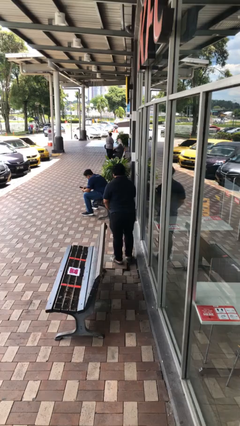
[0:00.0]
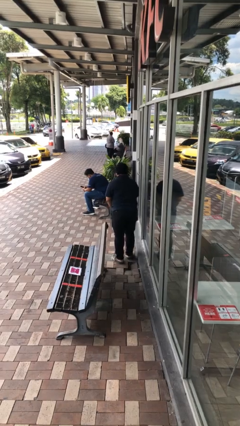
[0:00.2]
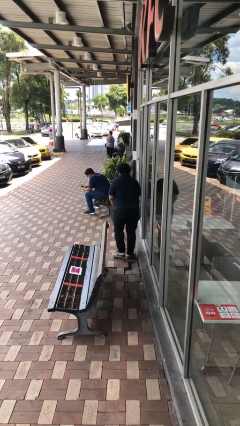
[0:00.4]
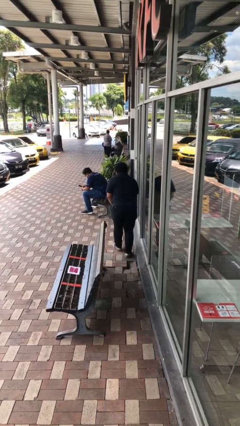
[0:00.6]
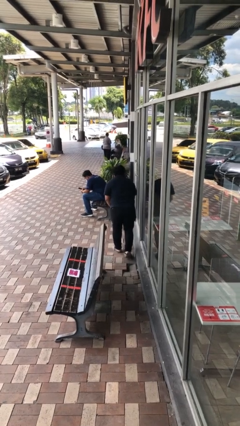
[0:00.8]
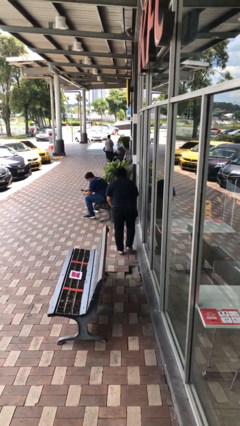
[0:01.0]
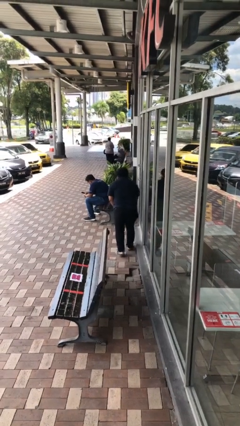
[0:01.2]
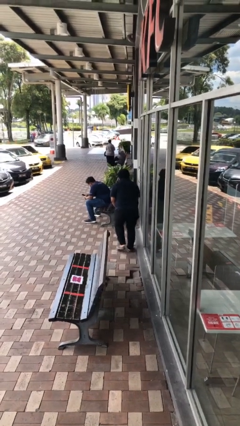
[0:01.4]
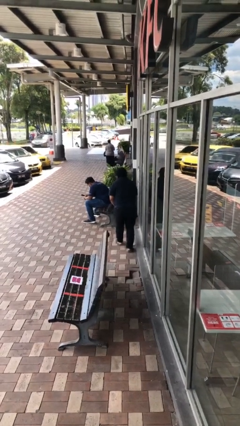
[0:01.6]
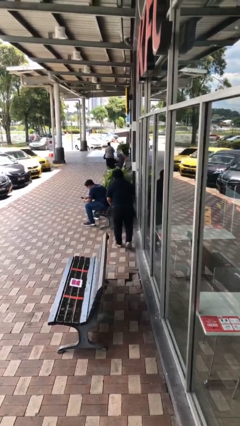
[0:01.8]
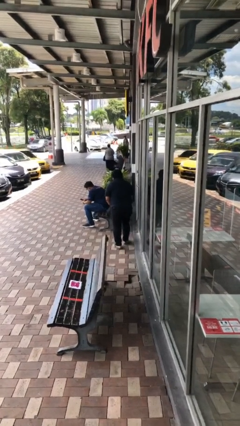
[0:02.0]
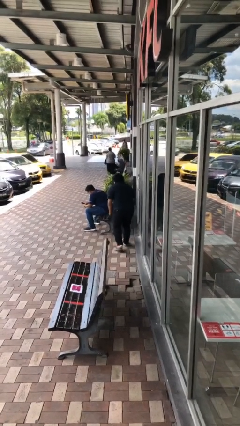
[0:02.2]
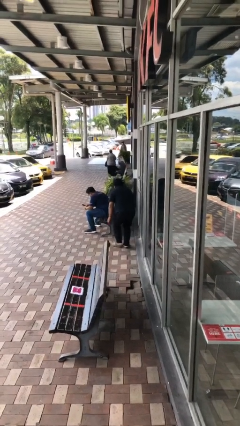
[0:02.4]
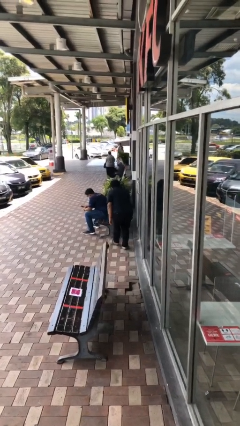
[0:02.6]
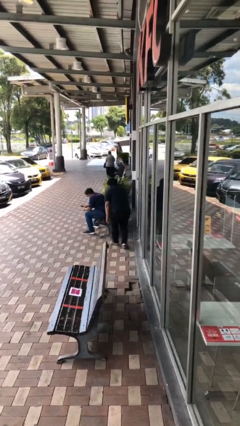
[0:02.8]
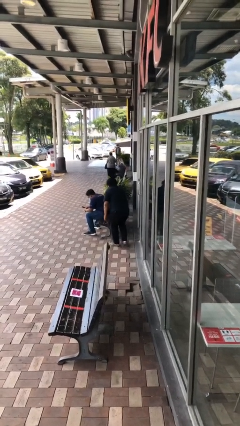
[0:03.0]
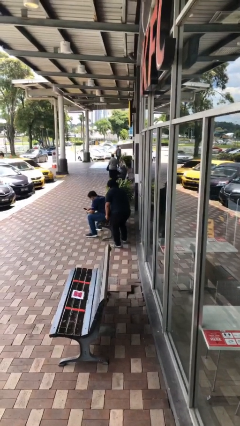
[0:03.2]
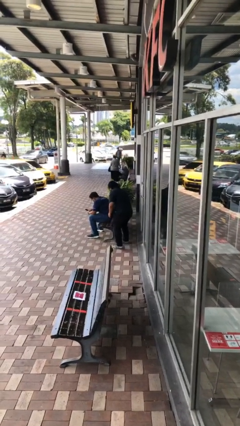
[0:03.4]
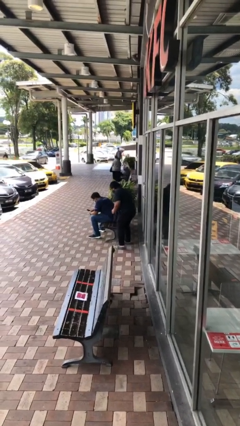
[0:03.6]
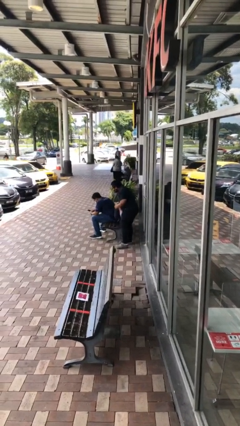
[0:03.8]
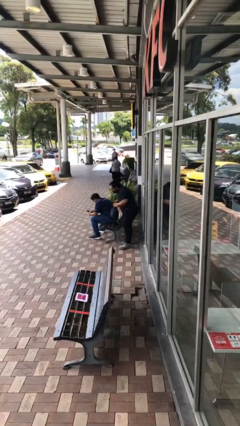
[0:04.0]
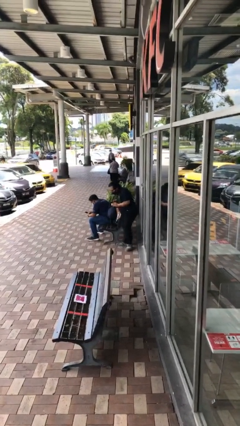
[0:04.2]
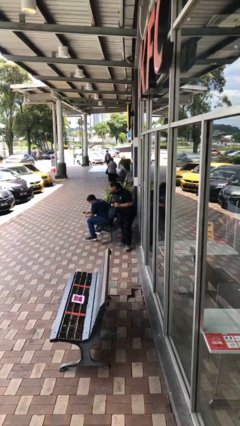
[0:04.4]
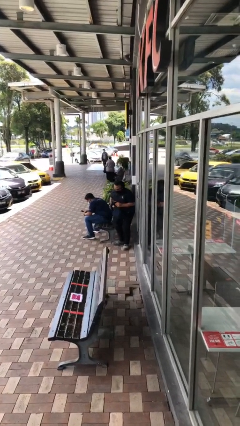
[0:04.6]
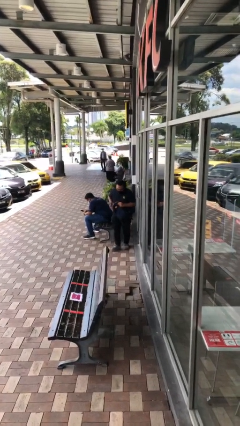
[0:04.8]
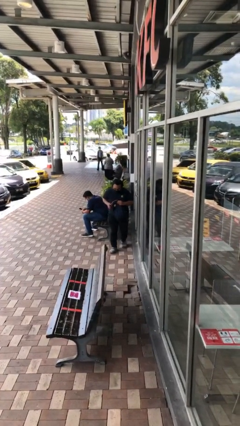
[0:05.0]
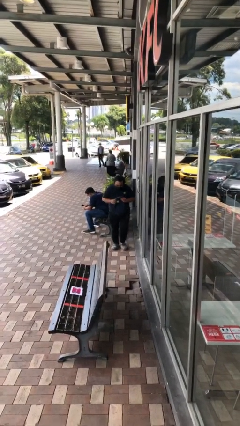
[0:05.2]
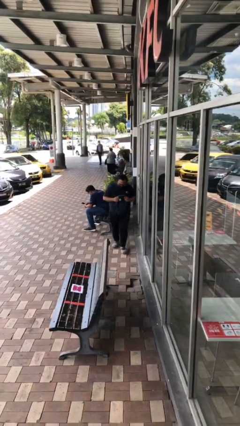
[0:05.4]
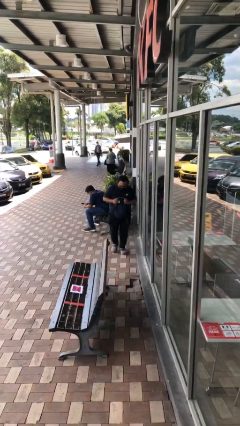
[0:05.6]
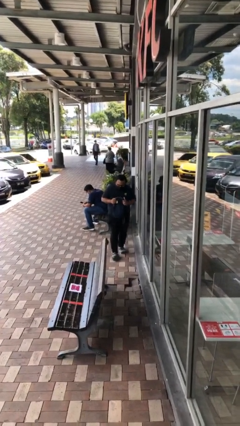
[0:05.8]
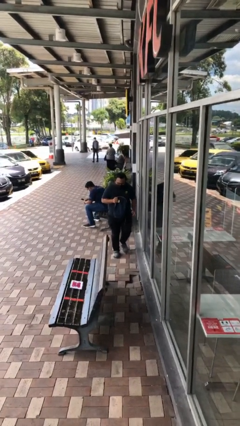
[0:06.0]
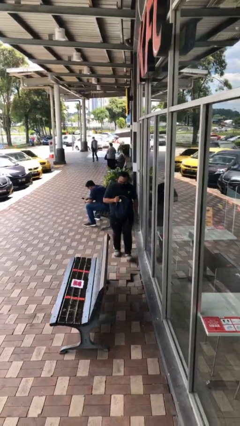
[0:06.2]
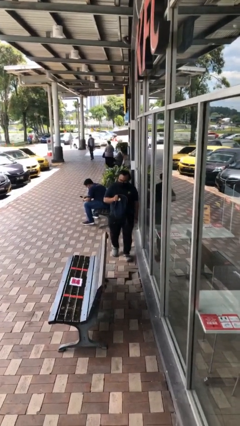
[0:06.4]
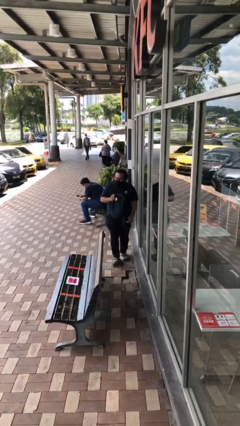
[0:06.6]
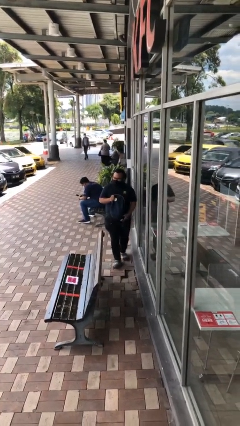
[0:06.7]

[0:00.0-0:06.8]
person steals object from person

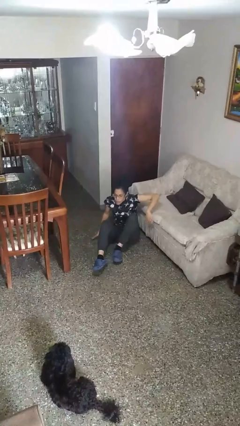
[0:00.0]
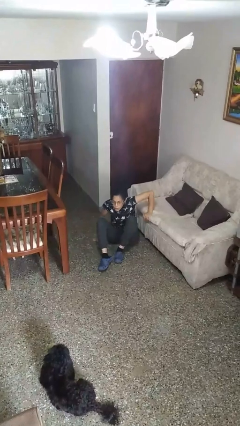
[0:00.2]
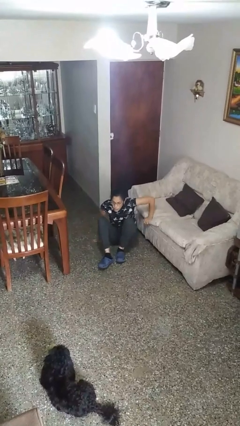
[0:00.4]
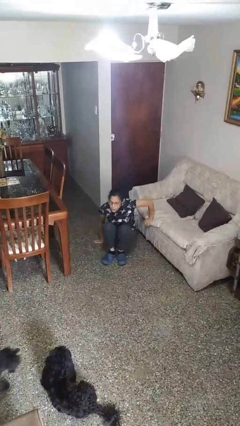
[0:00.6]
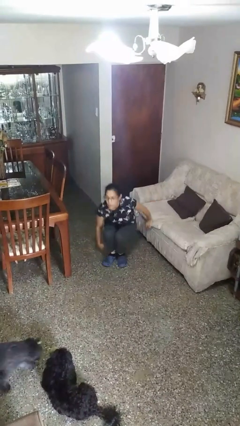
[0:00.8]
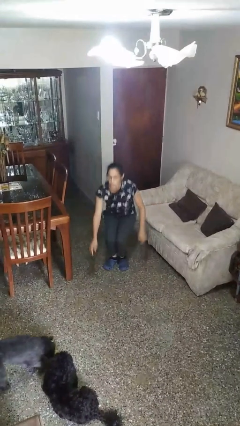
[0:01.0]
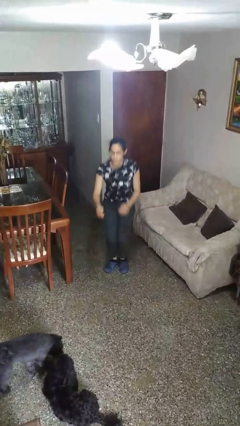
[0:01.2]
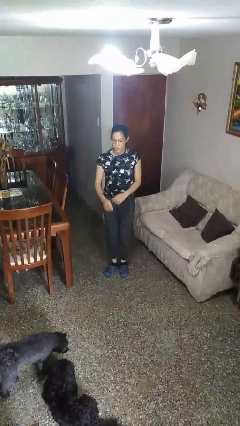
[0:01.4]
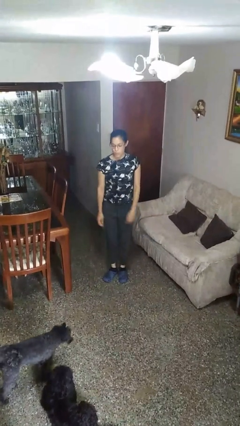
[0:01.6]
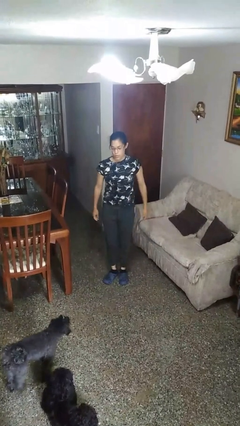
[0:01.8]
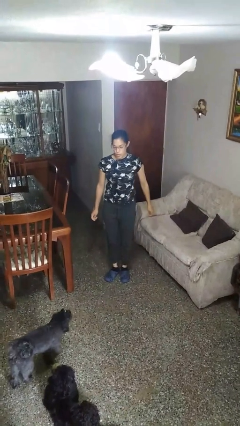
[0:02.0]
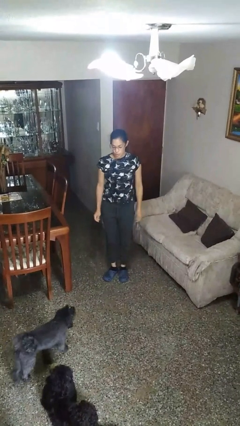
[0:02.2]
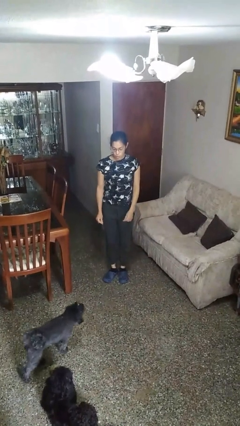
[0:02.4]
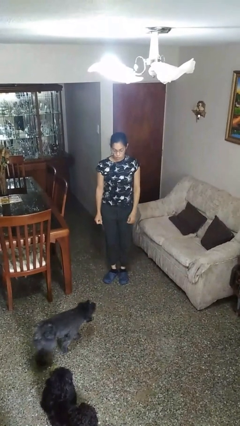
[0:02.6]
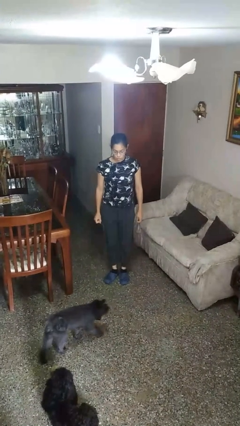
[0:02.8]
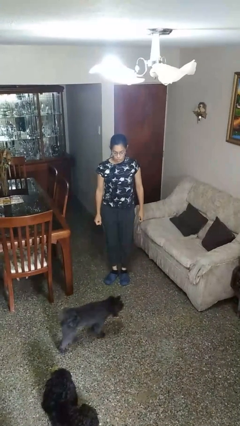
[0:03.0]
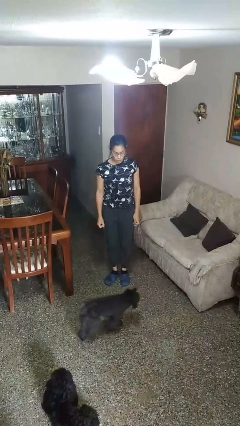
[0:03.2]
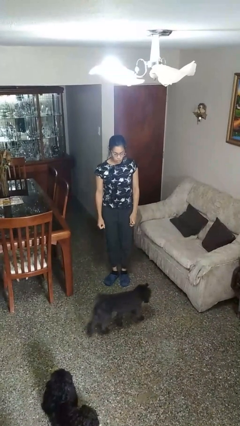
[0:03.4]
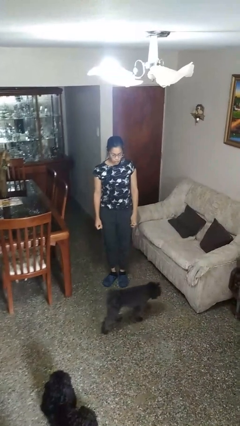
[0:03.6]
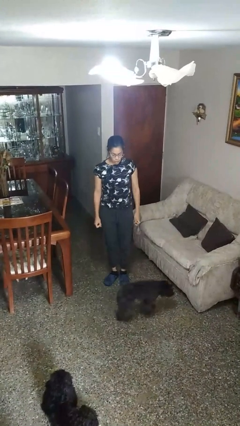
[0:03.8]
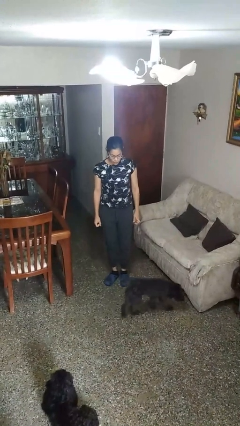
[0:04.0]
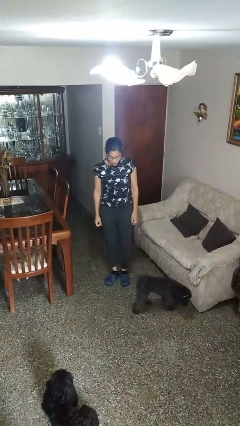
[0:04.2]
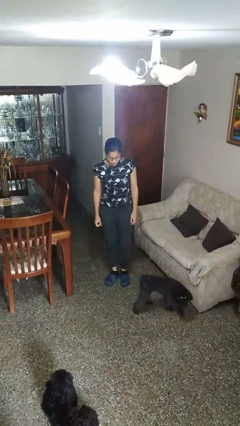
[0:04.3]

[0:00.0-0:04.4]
person stands up from floor

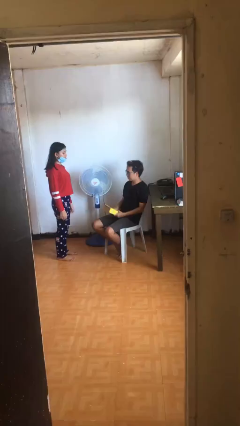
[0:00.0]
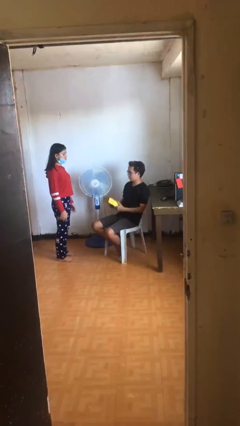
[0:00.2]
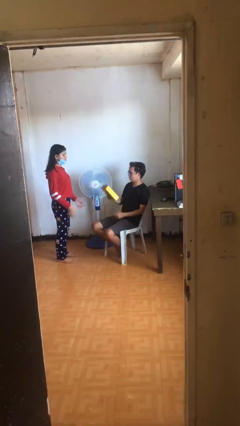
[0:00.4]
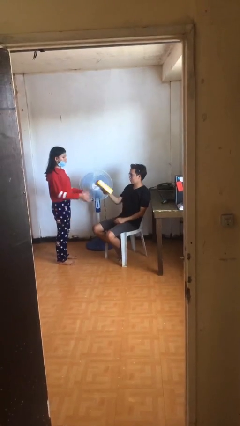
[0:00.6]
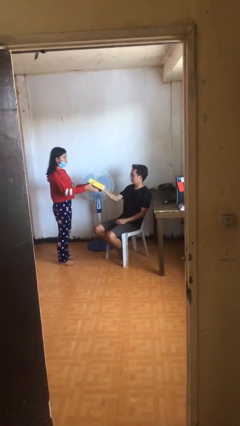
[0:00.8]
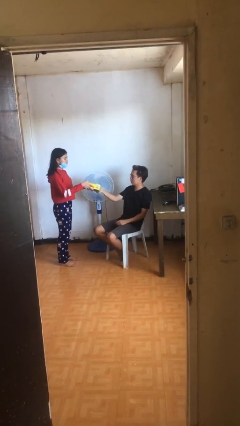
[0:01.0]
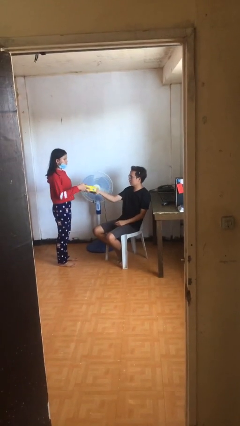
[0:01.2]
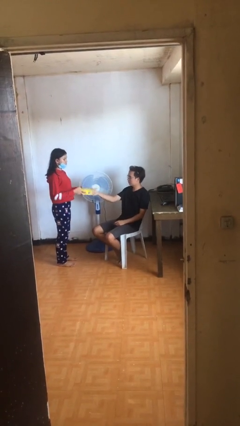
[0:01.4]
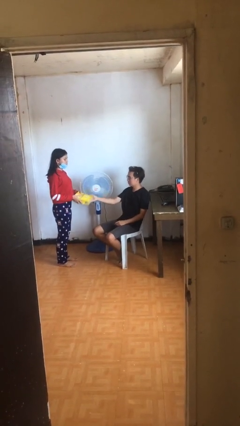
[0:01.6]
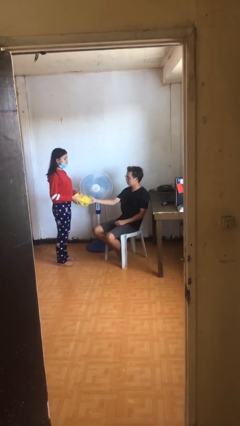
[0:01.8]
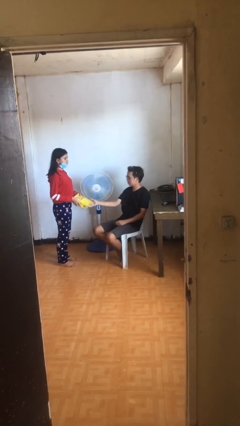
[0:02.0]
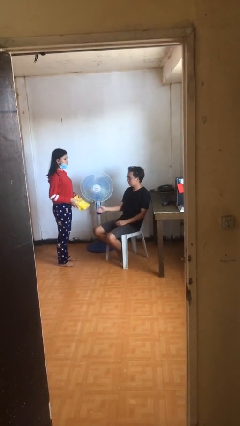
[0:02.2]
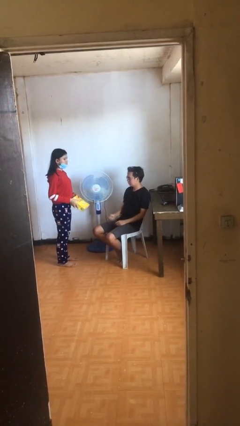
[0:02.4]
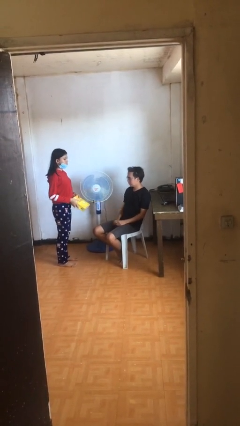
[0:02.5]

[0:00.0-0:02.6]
person transfers object to person

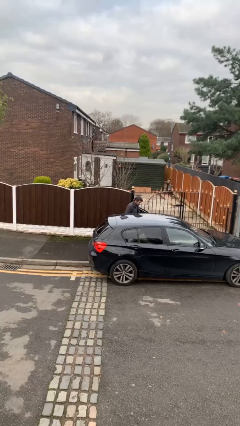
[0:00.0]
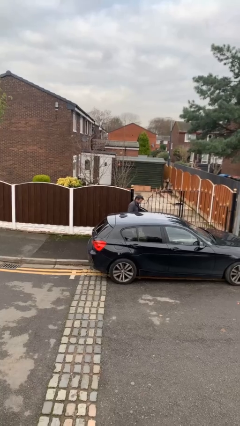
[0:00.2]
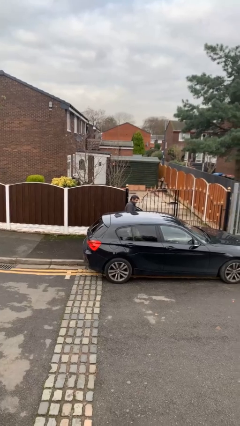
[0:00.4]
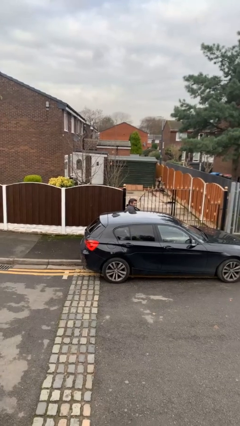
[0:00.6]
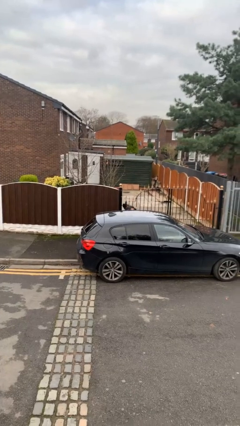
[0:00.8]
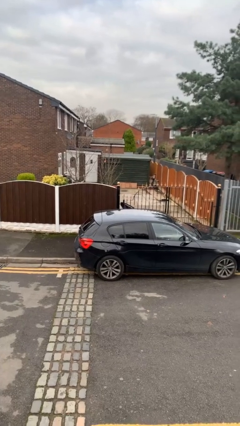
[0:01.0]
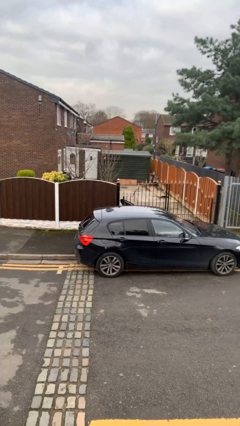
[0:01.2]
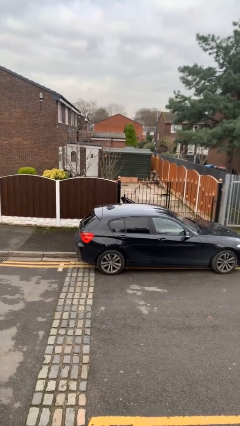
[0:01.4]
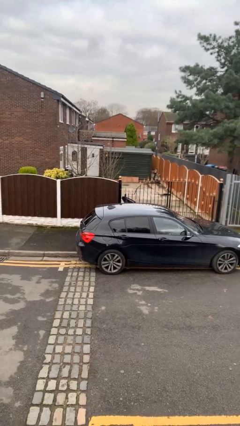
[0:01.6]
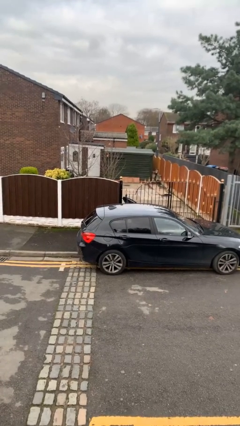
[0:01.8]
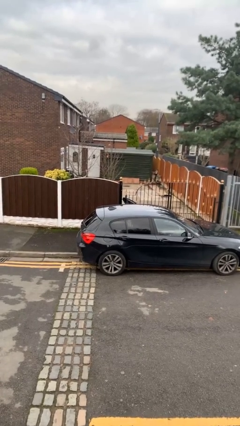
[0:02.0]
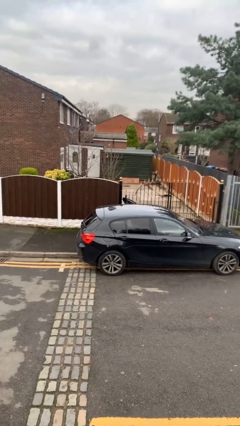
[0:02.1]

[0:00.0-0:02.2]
person enters car

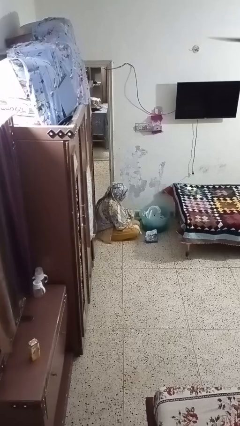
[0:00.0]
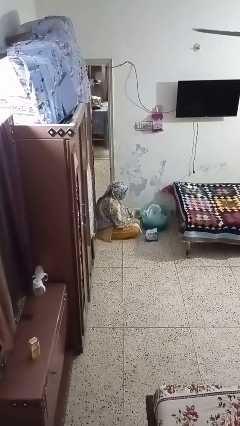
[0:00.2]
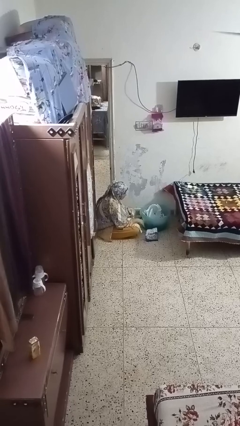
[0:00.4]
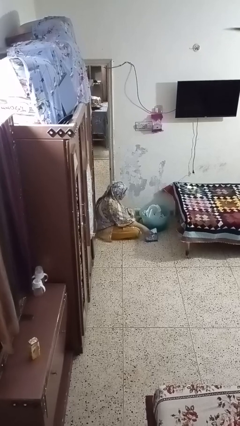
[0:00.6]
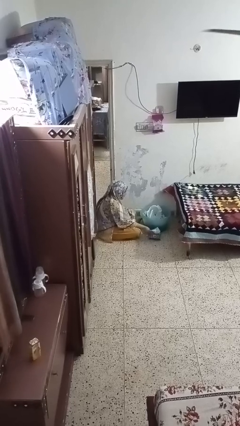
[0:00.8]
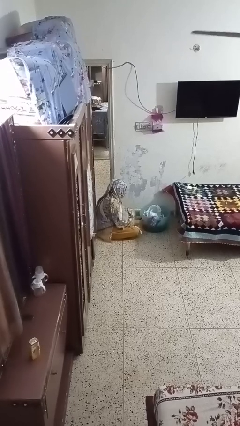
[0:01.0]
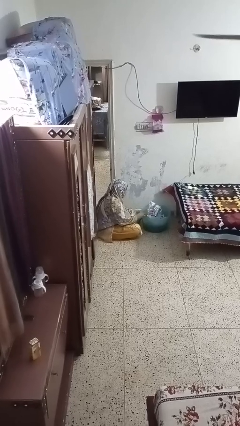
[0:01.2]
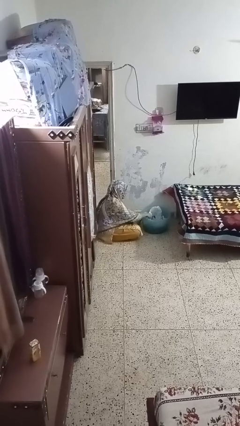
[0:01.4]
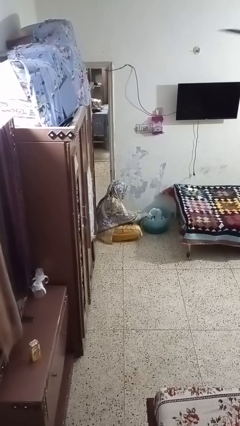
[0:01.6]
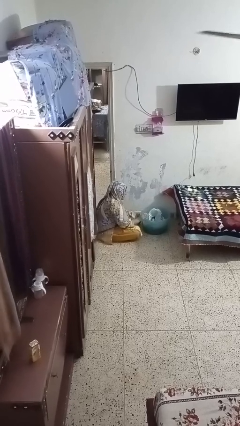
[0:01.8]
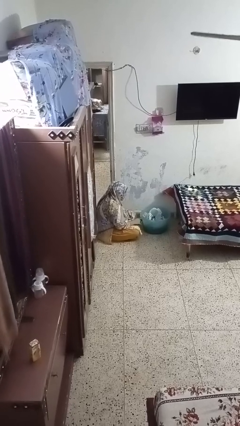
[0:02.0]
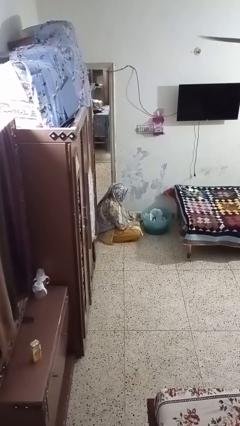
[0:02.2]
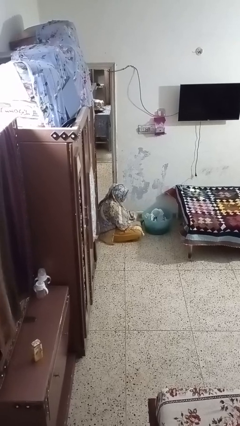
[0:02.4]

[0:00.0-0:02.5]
person puts object into basket
